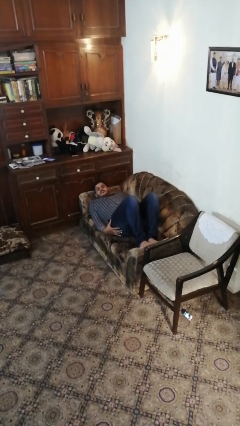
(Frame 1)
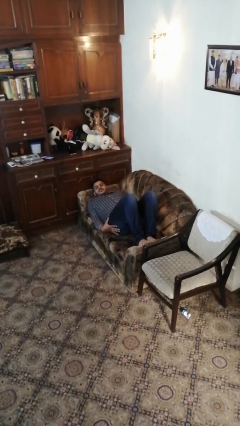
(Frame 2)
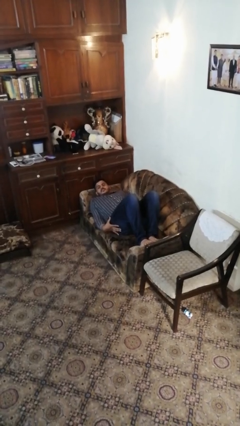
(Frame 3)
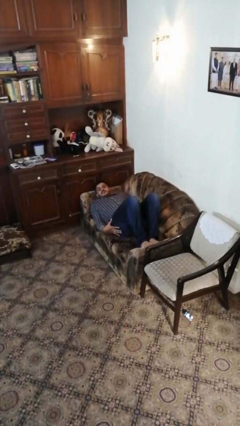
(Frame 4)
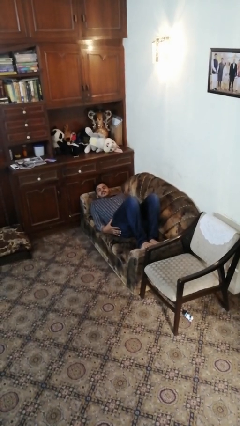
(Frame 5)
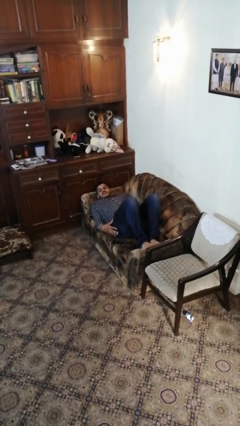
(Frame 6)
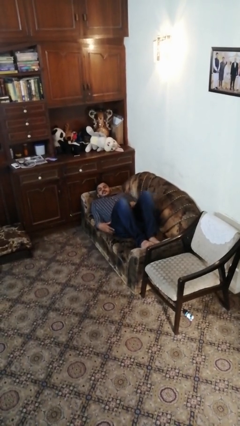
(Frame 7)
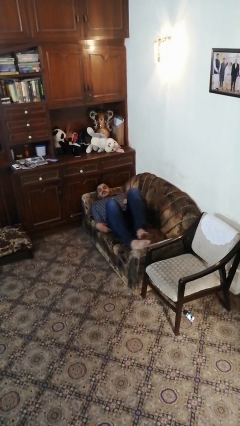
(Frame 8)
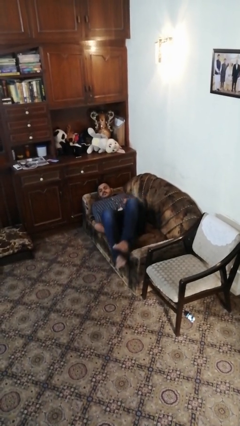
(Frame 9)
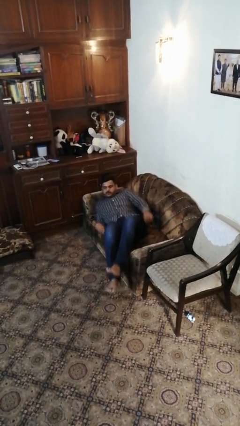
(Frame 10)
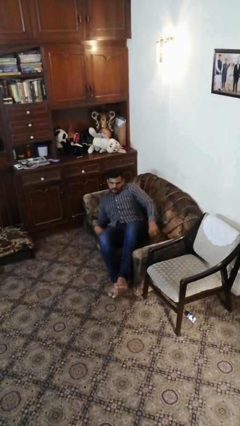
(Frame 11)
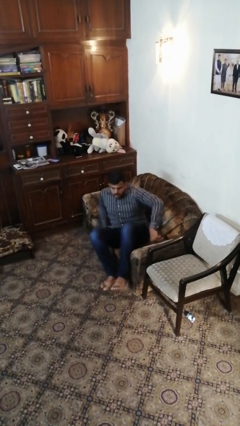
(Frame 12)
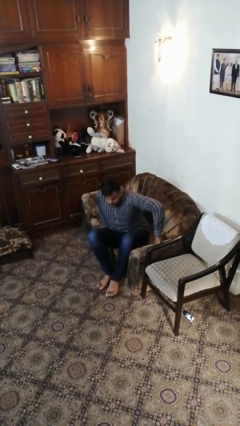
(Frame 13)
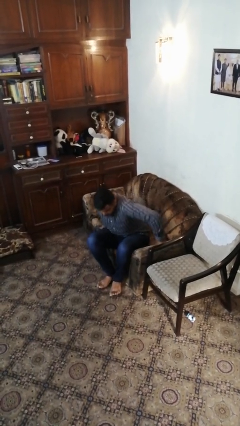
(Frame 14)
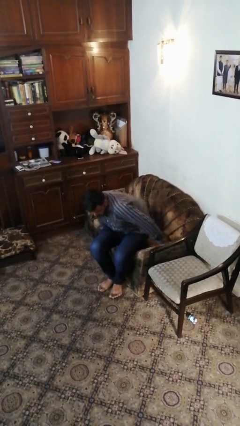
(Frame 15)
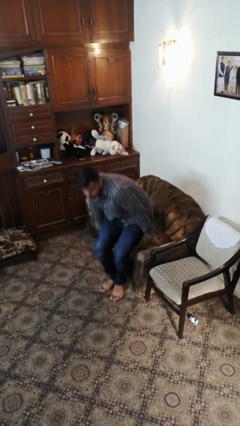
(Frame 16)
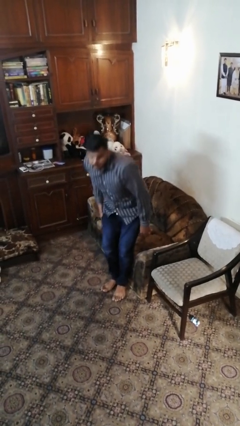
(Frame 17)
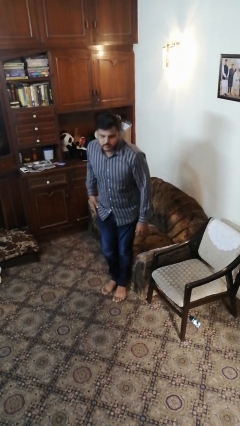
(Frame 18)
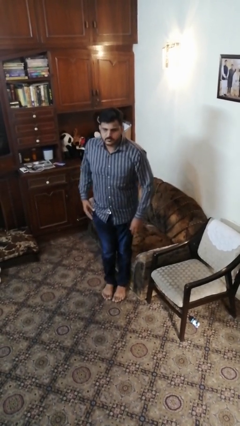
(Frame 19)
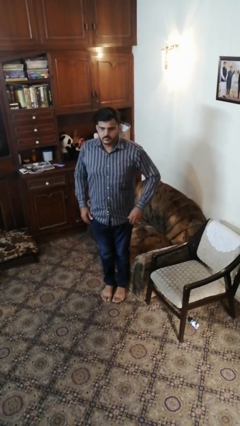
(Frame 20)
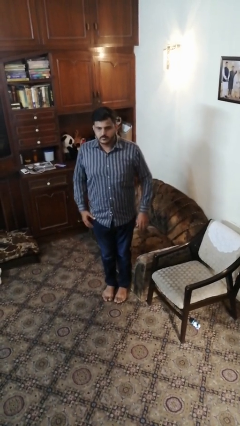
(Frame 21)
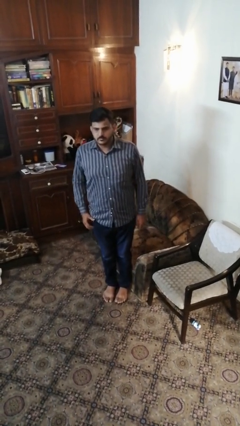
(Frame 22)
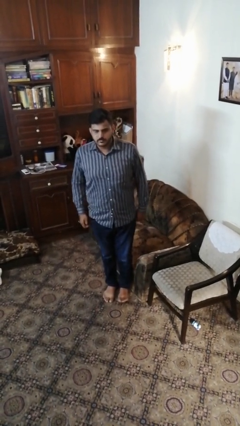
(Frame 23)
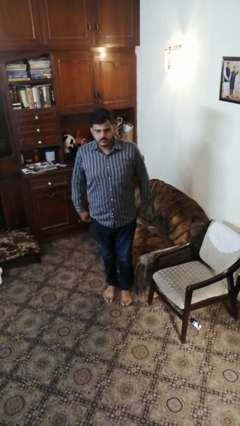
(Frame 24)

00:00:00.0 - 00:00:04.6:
person stands up

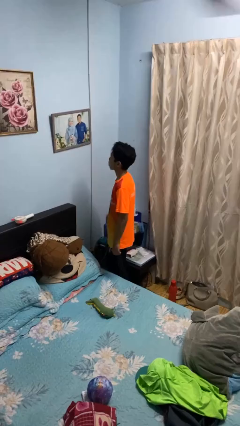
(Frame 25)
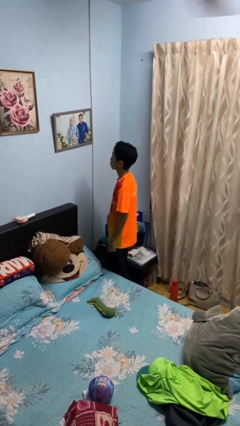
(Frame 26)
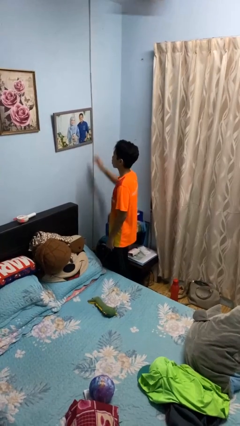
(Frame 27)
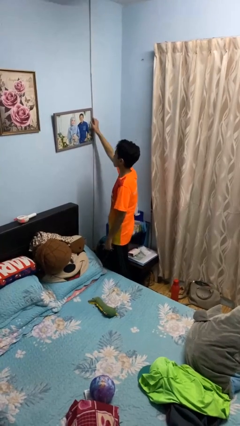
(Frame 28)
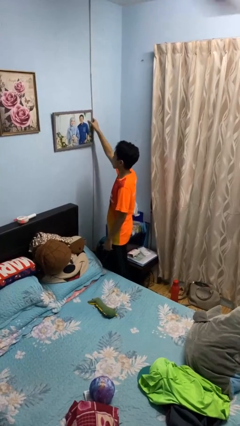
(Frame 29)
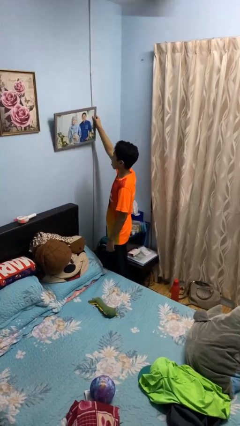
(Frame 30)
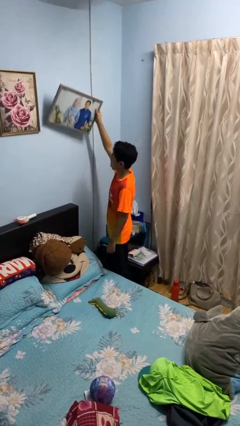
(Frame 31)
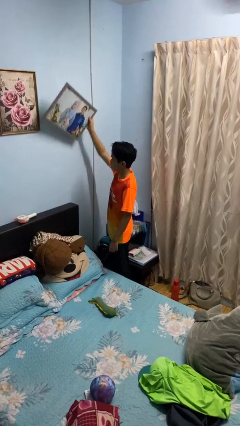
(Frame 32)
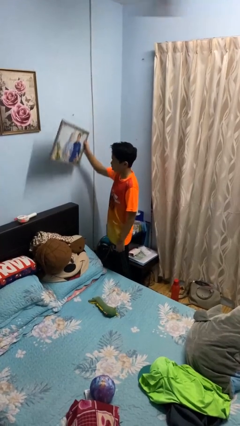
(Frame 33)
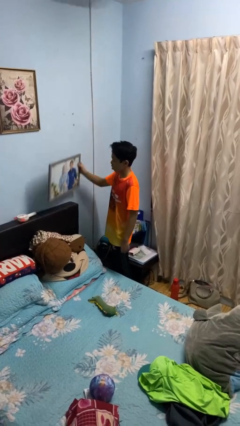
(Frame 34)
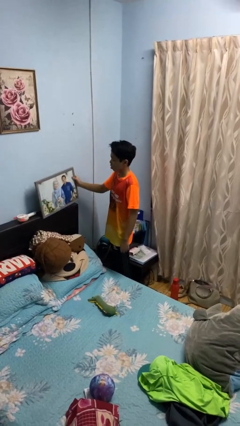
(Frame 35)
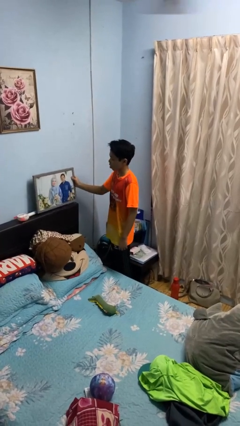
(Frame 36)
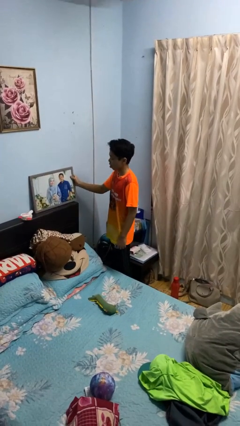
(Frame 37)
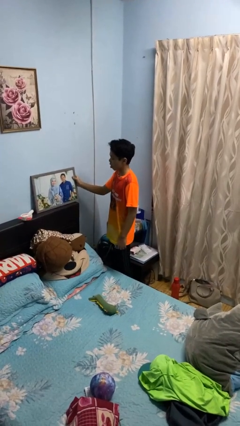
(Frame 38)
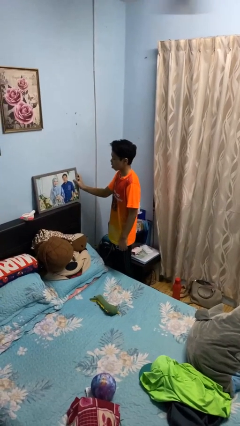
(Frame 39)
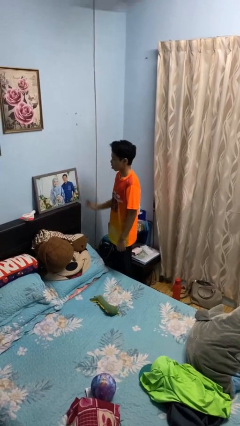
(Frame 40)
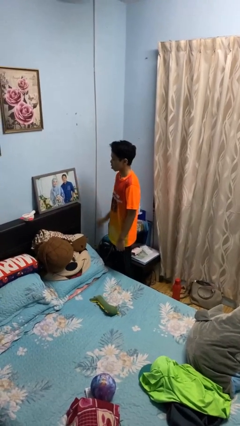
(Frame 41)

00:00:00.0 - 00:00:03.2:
person takes down picture frame

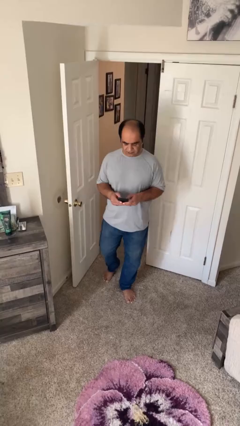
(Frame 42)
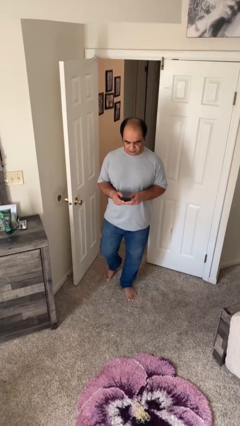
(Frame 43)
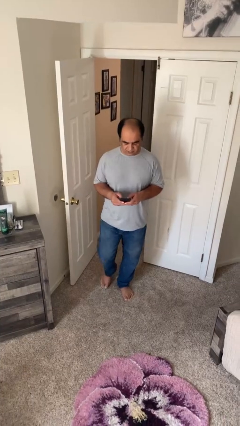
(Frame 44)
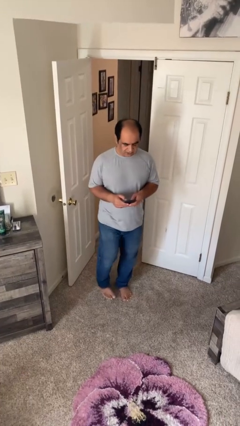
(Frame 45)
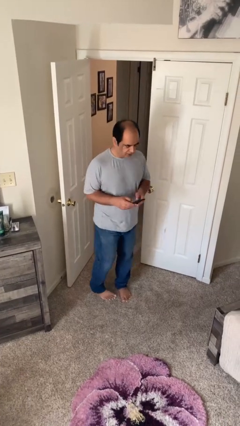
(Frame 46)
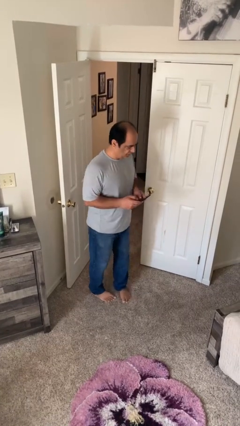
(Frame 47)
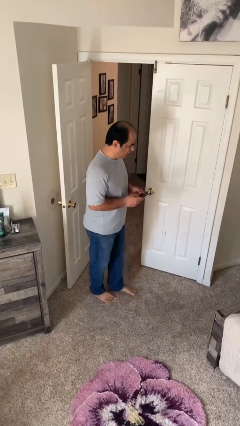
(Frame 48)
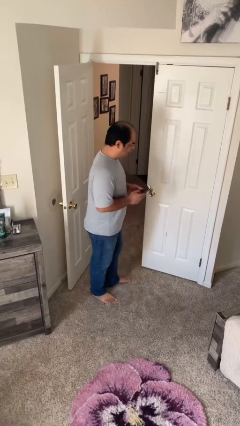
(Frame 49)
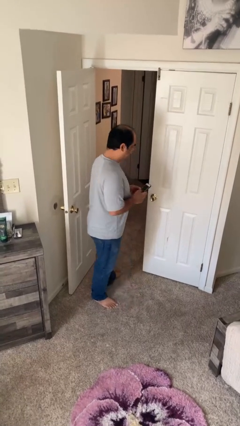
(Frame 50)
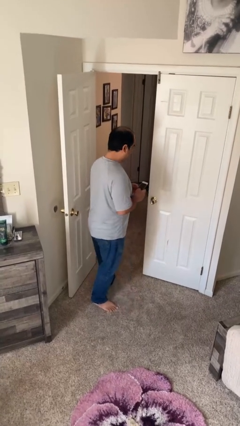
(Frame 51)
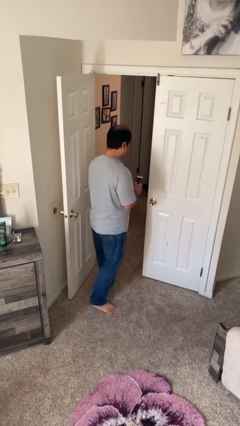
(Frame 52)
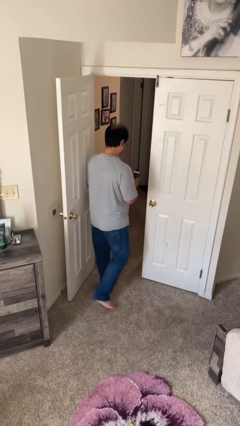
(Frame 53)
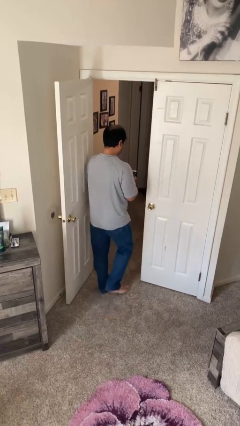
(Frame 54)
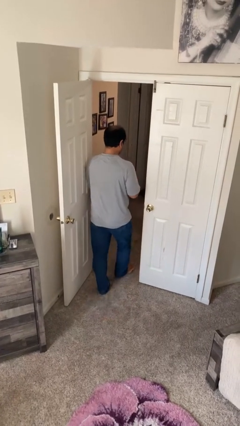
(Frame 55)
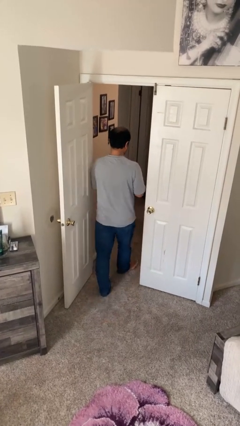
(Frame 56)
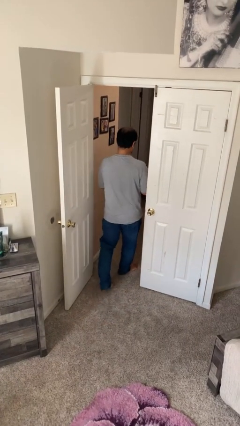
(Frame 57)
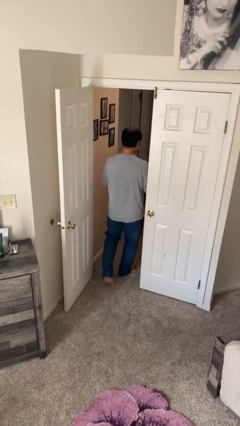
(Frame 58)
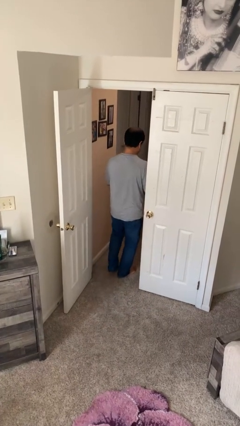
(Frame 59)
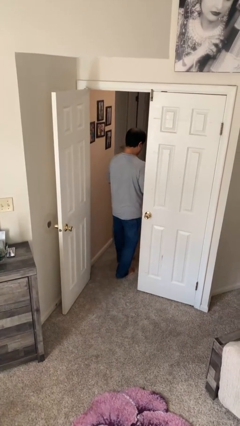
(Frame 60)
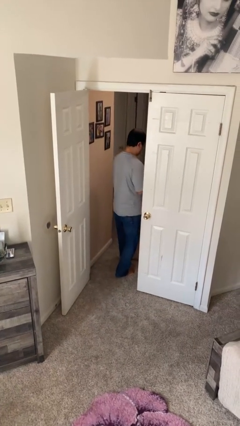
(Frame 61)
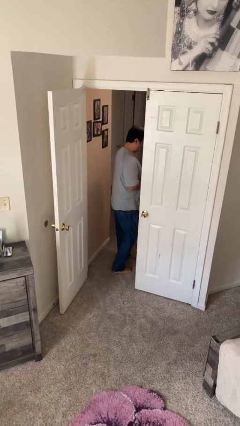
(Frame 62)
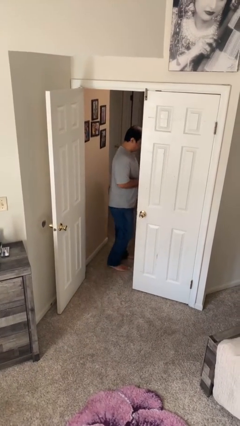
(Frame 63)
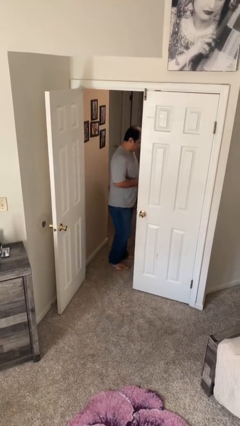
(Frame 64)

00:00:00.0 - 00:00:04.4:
person exits scene through structure

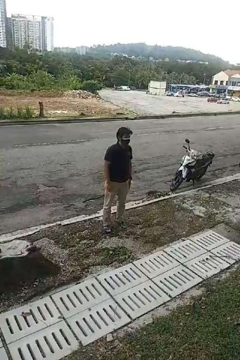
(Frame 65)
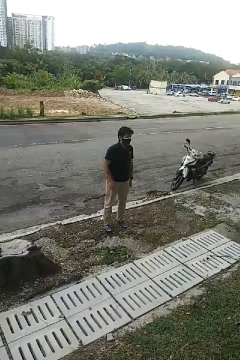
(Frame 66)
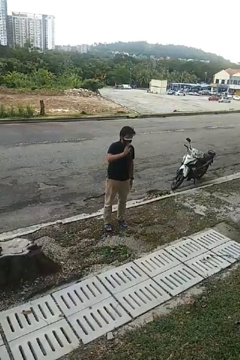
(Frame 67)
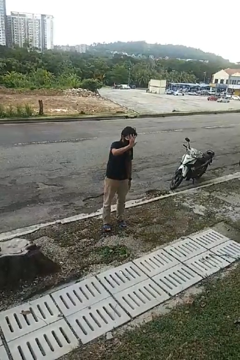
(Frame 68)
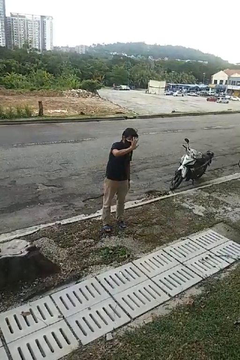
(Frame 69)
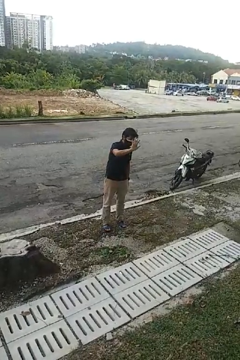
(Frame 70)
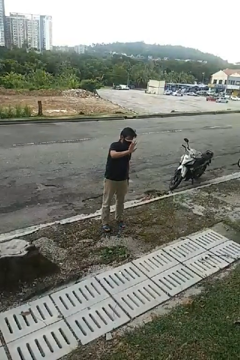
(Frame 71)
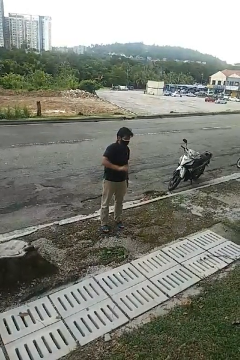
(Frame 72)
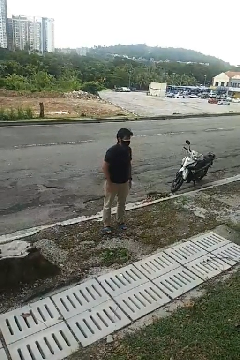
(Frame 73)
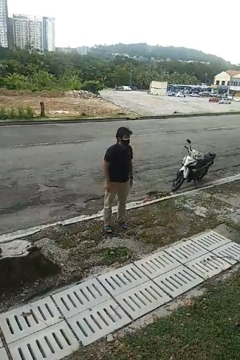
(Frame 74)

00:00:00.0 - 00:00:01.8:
person gestures number five

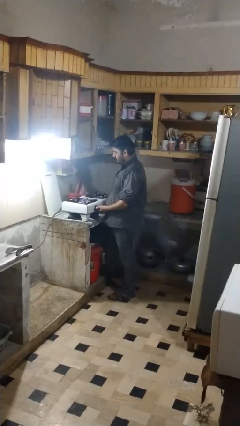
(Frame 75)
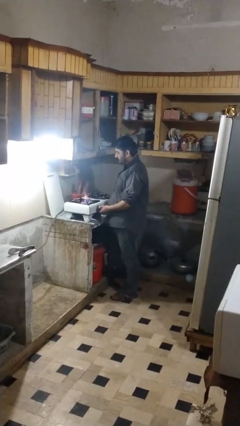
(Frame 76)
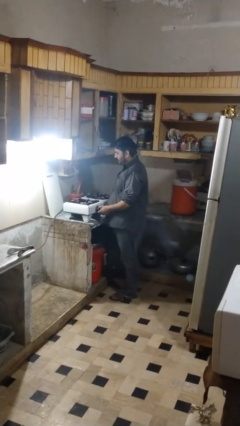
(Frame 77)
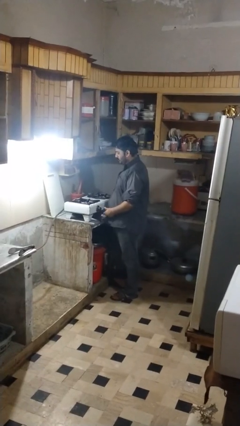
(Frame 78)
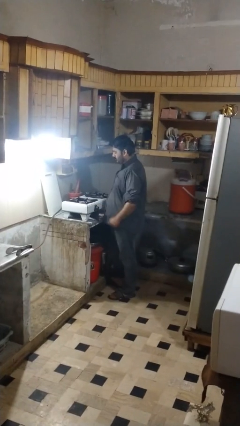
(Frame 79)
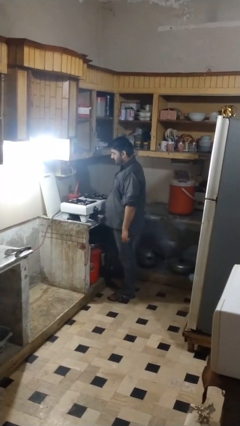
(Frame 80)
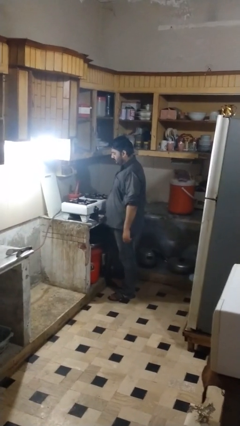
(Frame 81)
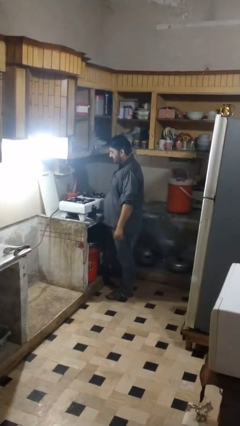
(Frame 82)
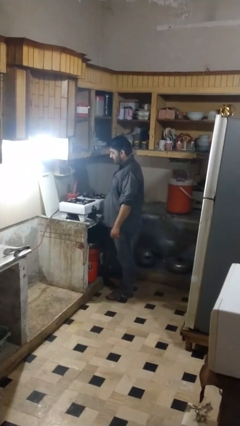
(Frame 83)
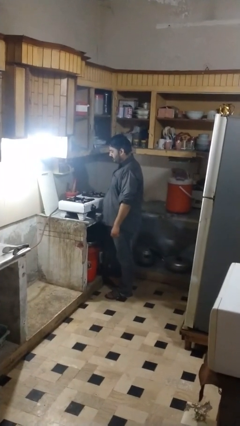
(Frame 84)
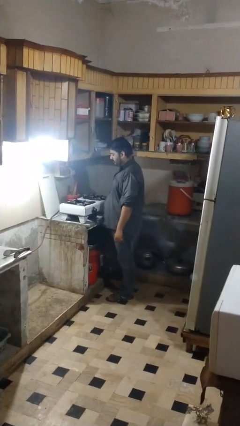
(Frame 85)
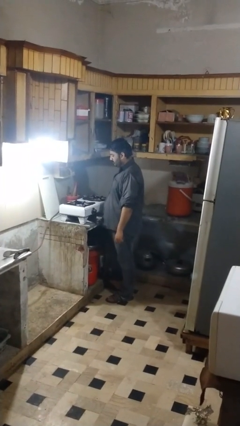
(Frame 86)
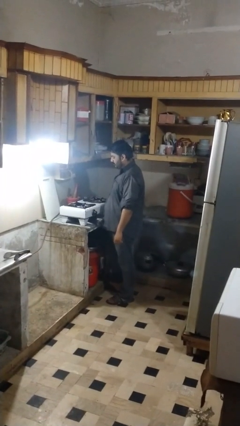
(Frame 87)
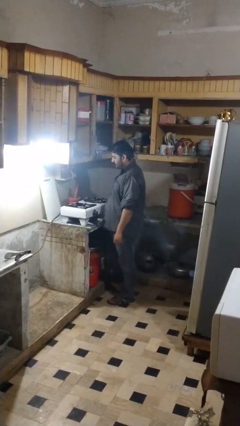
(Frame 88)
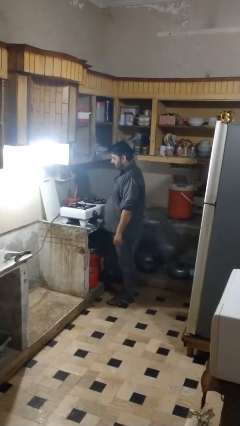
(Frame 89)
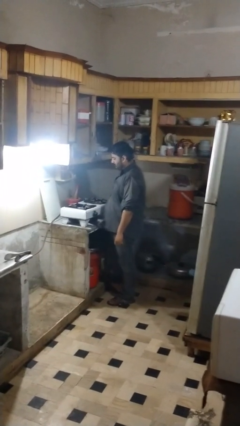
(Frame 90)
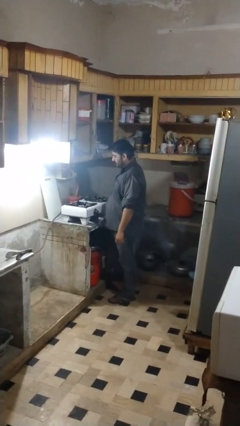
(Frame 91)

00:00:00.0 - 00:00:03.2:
person turns off stovetop

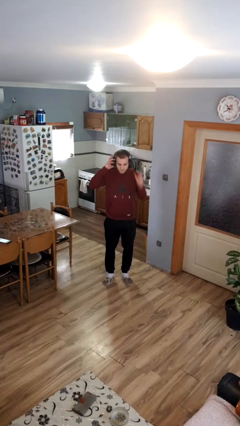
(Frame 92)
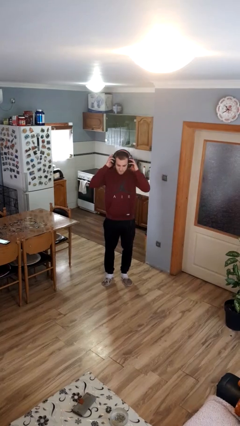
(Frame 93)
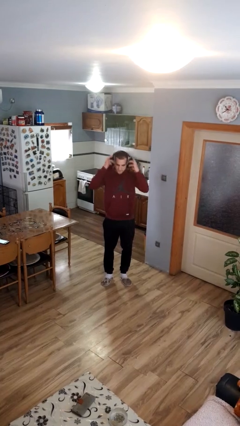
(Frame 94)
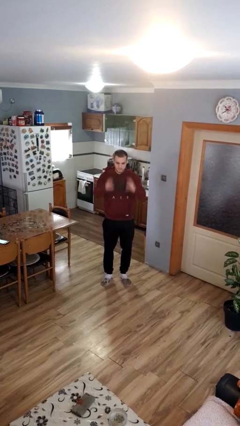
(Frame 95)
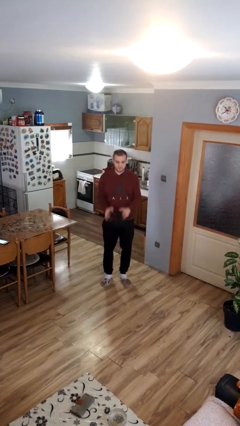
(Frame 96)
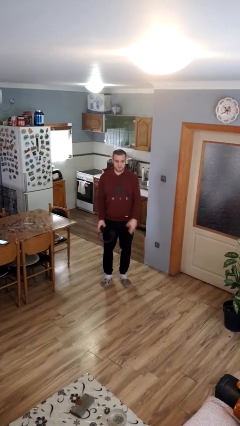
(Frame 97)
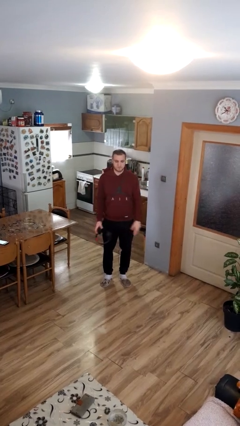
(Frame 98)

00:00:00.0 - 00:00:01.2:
person takes off headphones
